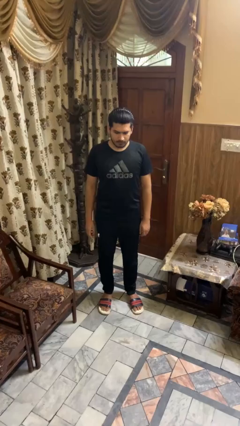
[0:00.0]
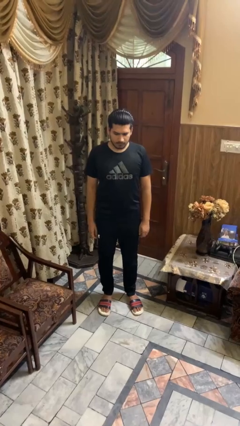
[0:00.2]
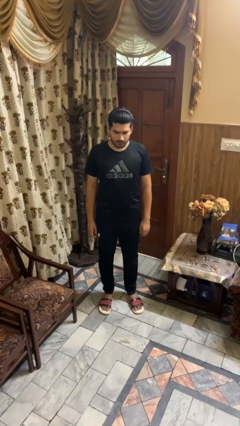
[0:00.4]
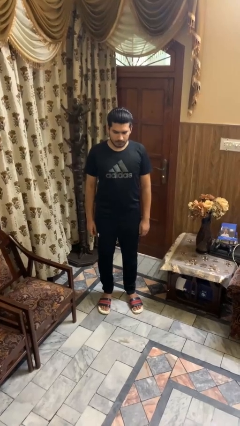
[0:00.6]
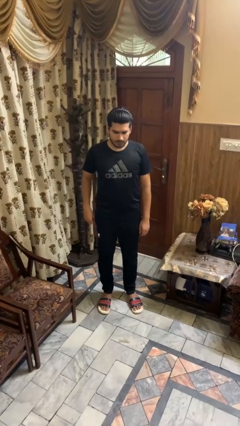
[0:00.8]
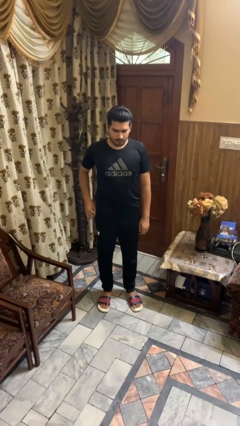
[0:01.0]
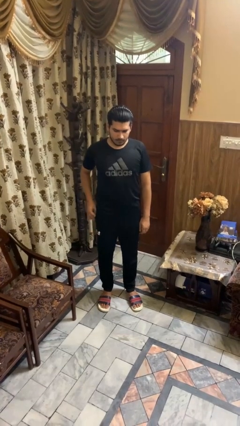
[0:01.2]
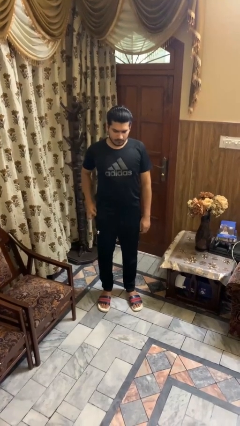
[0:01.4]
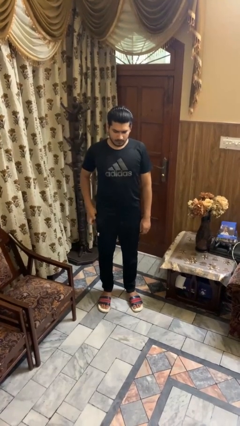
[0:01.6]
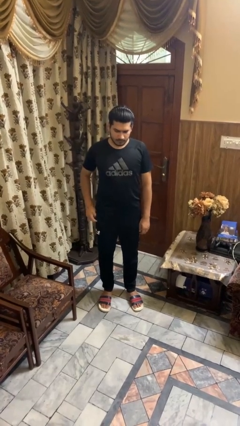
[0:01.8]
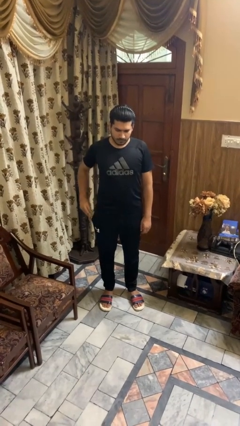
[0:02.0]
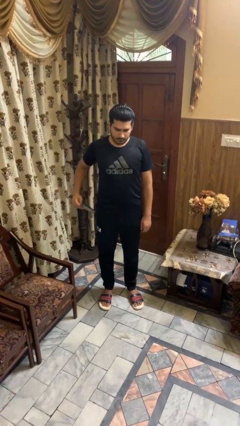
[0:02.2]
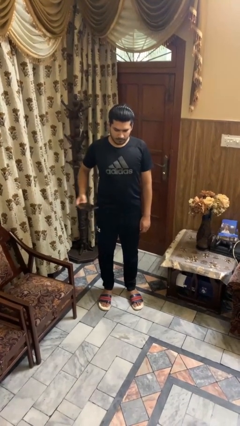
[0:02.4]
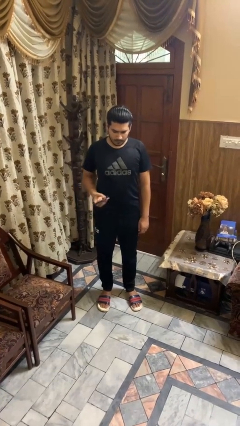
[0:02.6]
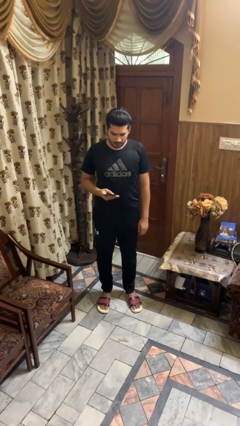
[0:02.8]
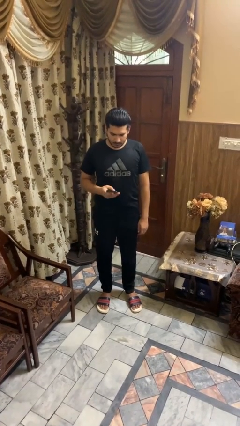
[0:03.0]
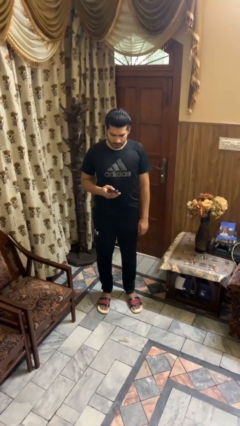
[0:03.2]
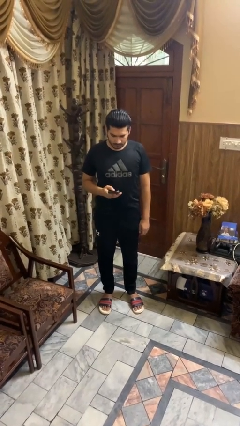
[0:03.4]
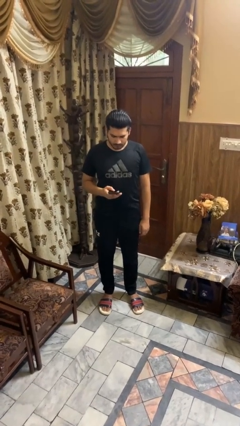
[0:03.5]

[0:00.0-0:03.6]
person takes phone from pocket

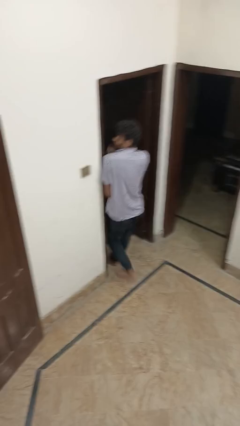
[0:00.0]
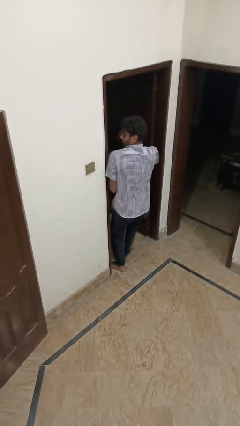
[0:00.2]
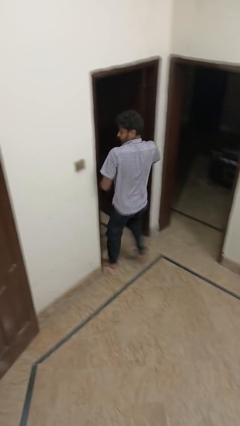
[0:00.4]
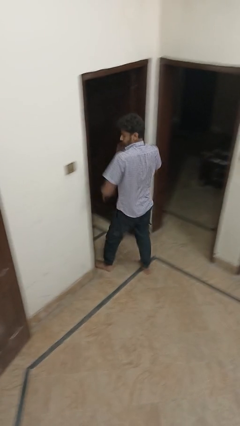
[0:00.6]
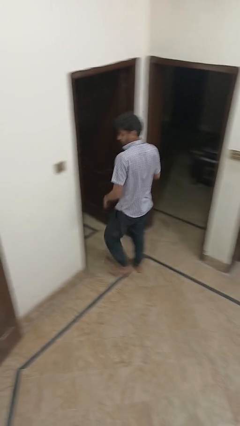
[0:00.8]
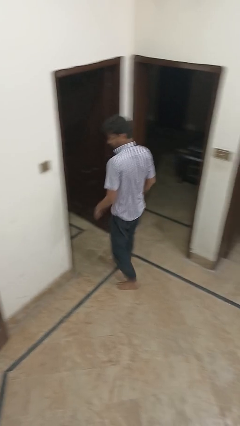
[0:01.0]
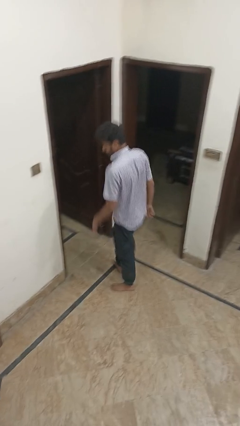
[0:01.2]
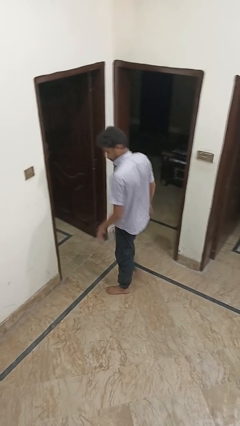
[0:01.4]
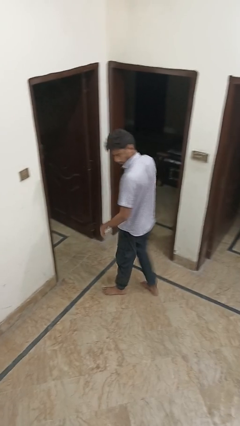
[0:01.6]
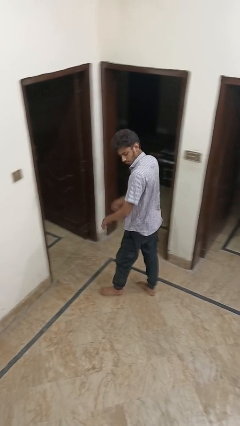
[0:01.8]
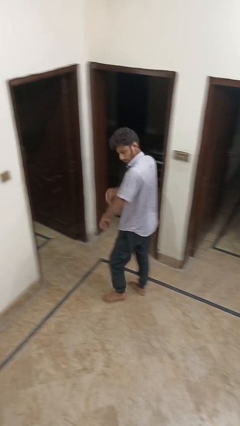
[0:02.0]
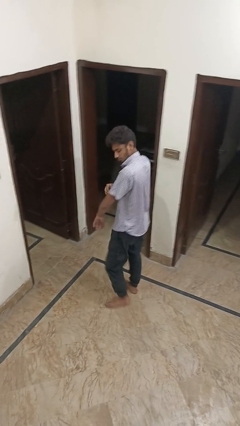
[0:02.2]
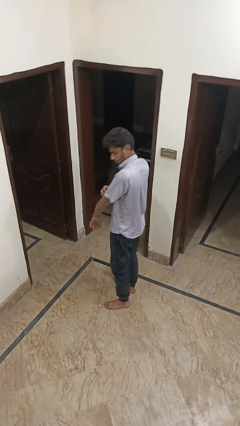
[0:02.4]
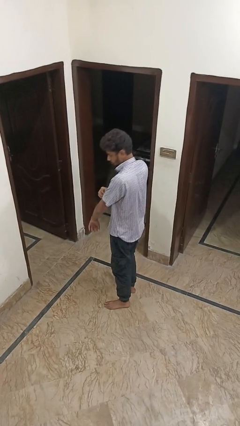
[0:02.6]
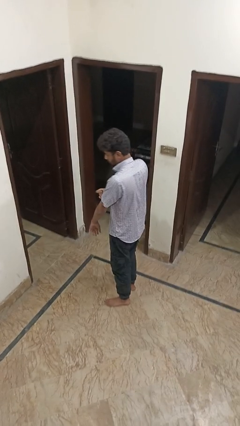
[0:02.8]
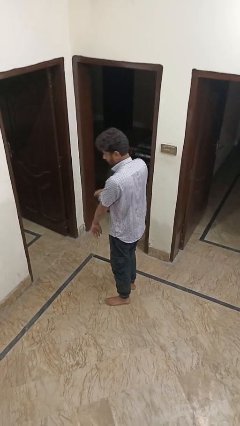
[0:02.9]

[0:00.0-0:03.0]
person bumps into wall

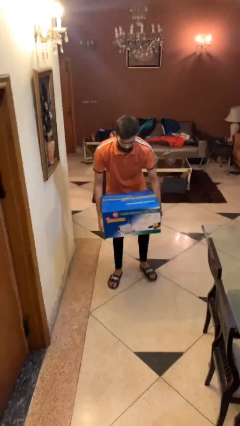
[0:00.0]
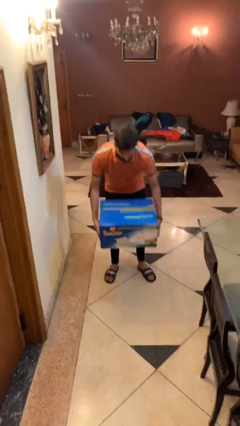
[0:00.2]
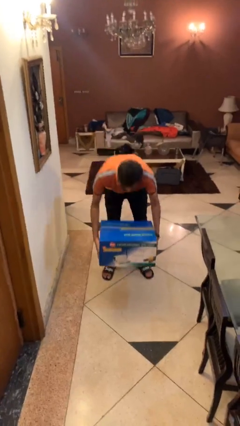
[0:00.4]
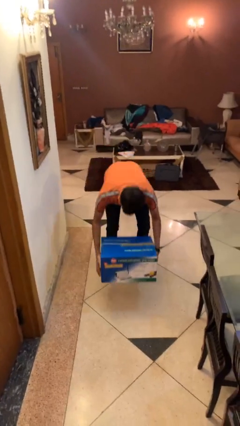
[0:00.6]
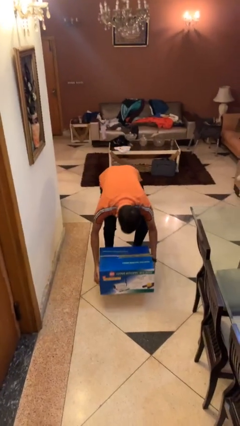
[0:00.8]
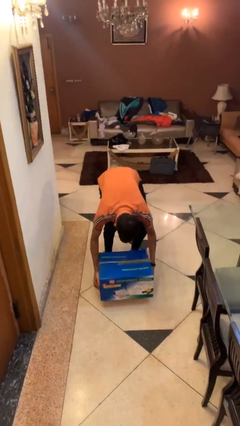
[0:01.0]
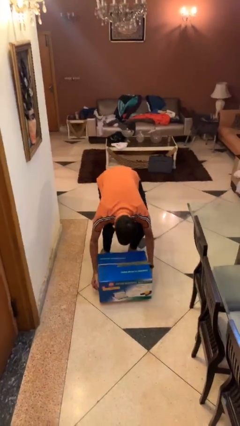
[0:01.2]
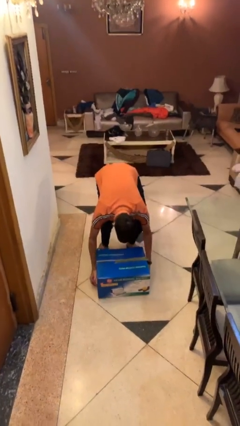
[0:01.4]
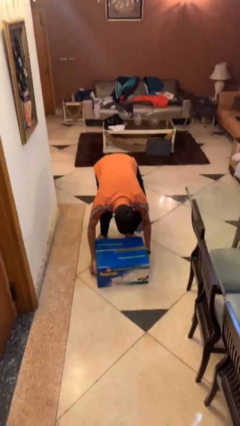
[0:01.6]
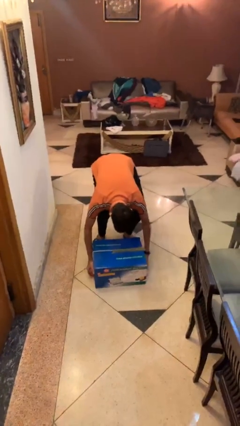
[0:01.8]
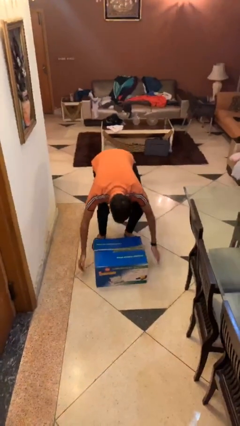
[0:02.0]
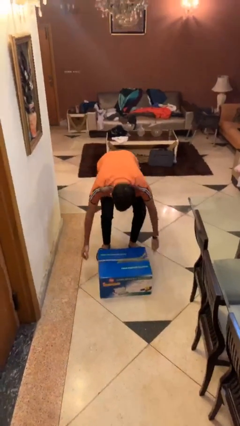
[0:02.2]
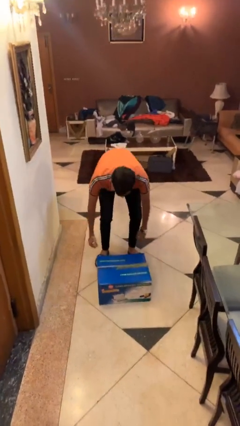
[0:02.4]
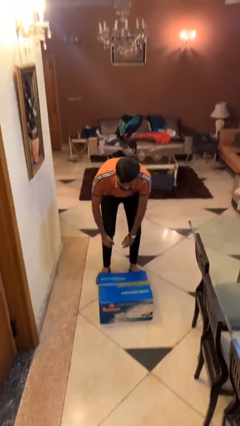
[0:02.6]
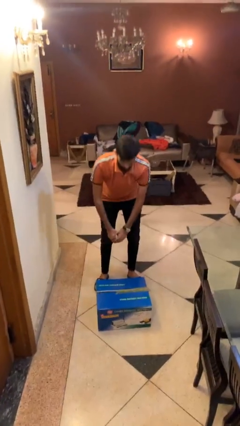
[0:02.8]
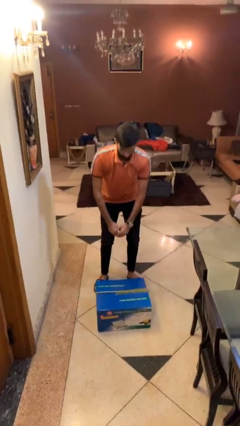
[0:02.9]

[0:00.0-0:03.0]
person puts down object on floor

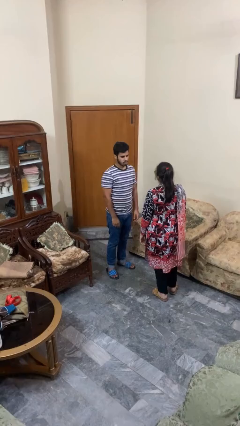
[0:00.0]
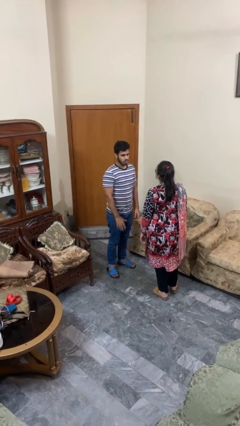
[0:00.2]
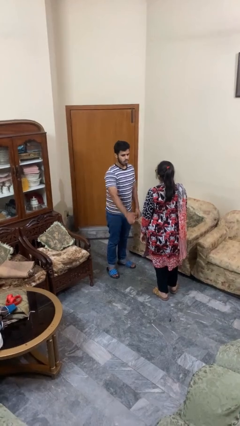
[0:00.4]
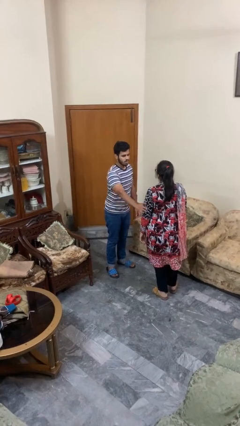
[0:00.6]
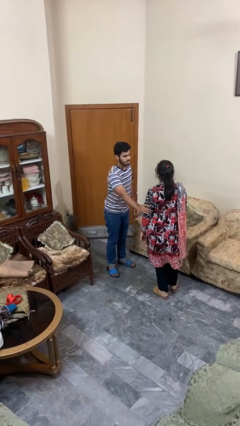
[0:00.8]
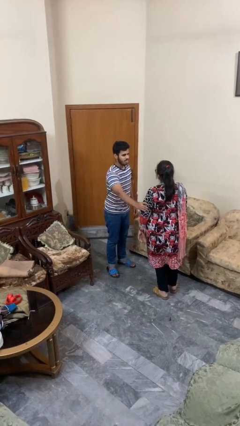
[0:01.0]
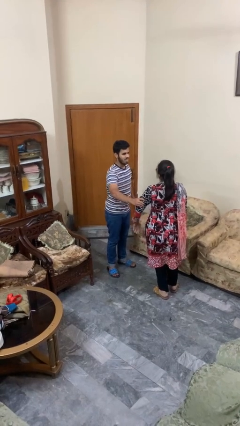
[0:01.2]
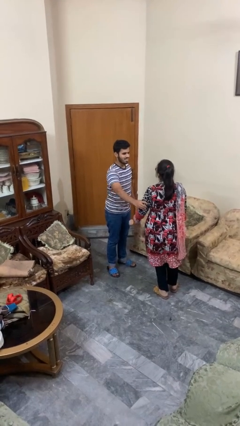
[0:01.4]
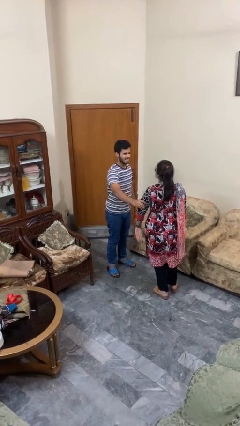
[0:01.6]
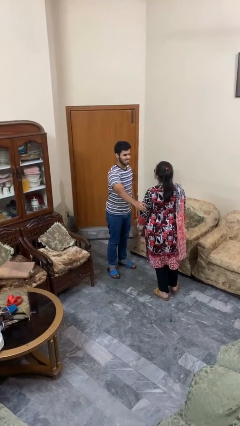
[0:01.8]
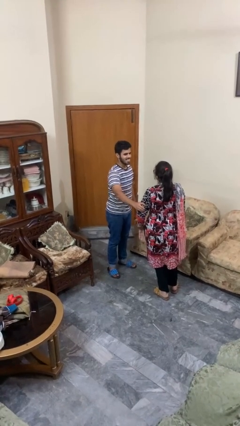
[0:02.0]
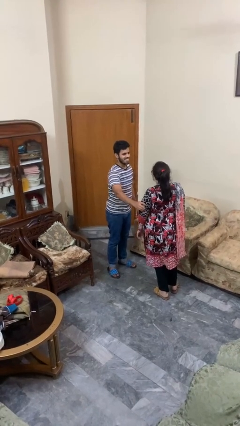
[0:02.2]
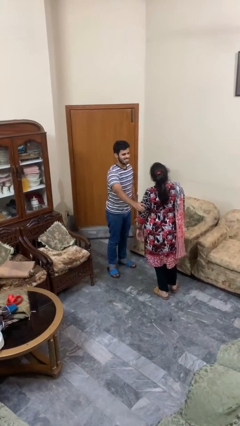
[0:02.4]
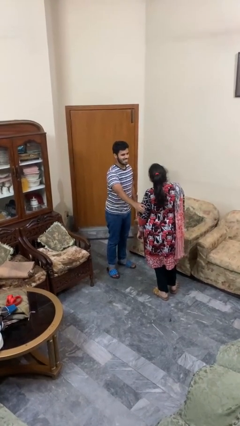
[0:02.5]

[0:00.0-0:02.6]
person grabs person by bicep

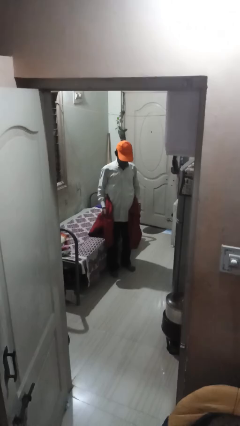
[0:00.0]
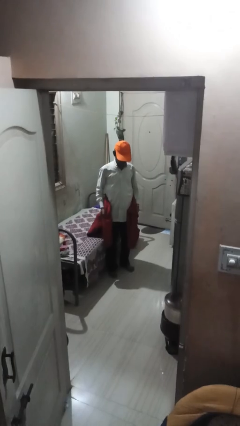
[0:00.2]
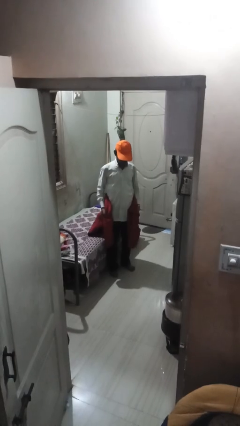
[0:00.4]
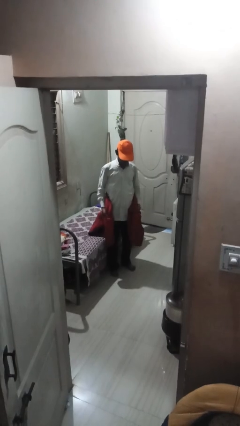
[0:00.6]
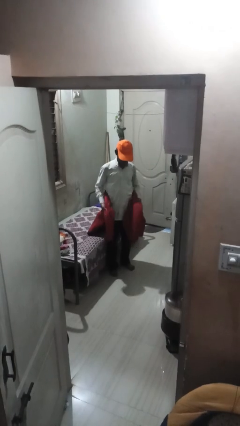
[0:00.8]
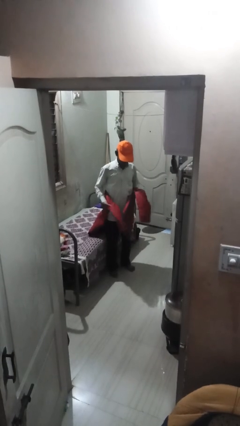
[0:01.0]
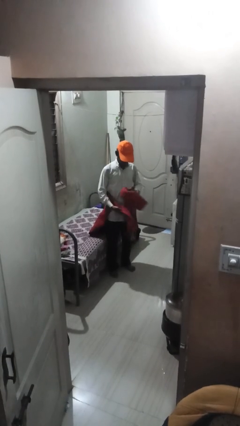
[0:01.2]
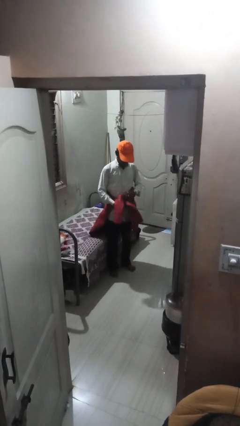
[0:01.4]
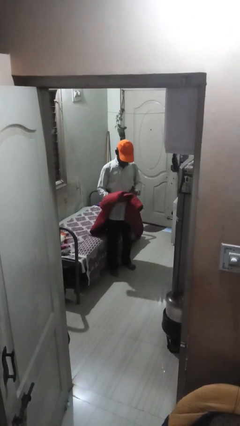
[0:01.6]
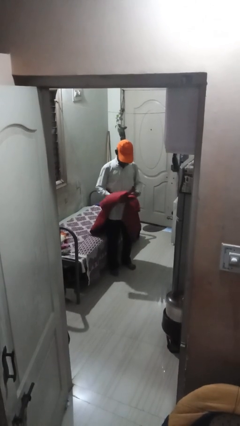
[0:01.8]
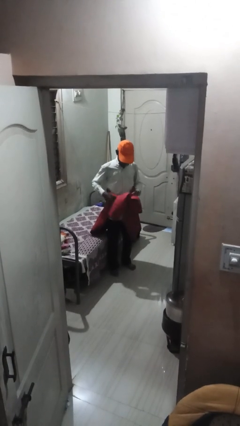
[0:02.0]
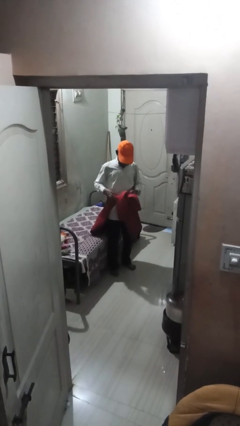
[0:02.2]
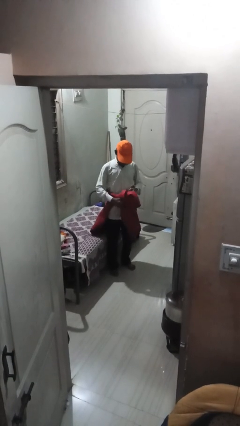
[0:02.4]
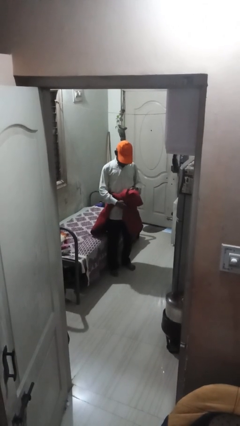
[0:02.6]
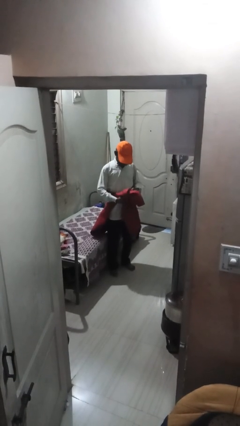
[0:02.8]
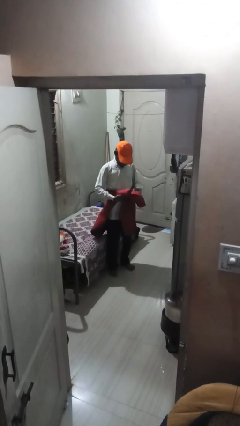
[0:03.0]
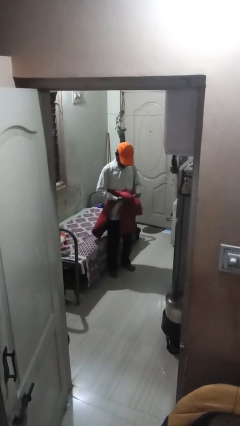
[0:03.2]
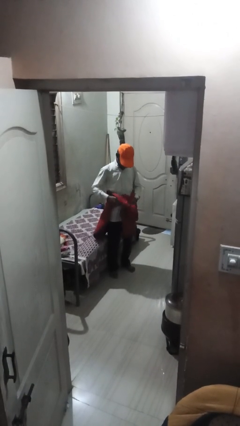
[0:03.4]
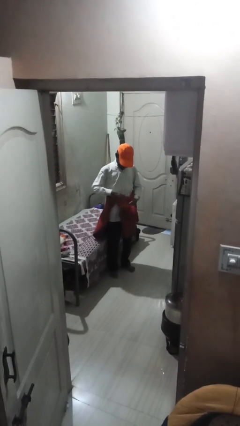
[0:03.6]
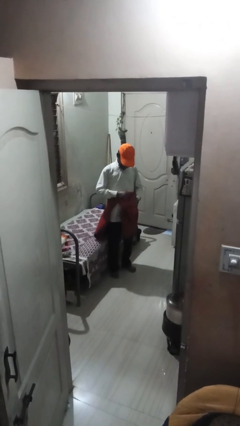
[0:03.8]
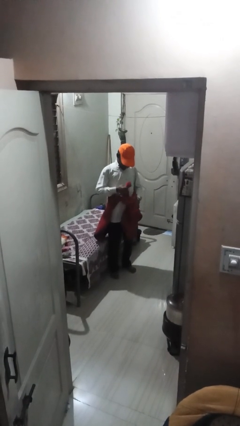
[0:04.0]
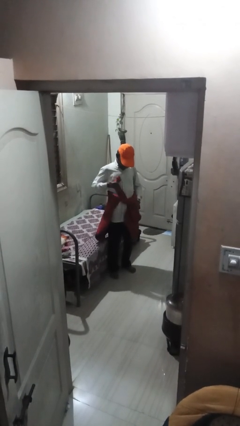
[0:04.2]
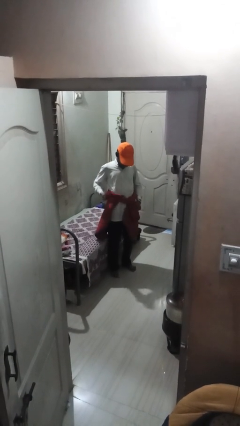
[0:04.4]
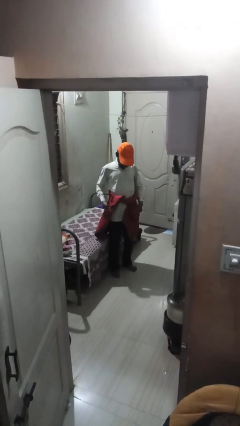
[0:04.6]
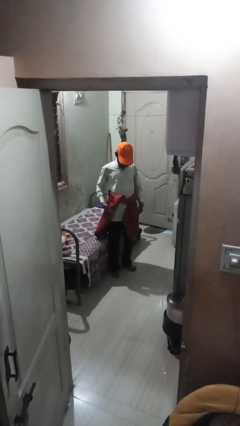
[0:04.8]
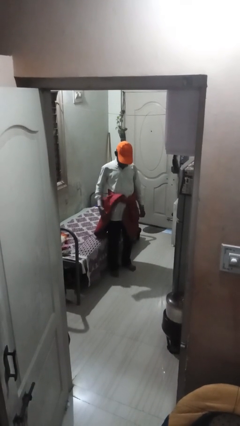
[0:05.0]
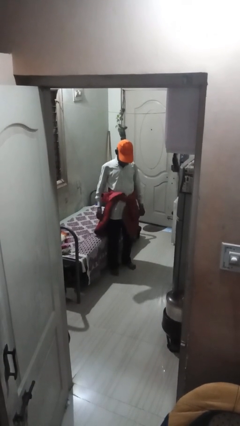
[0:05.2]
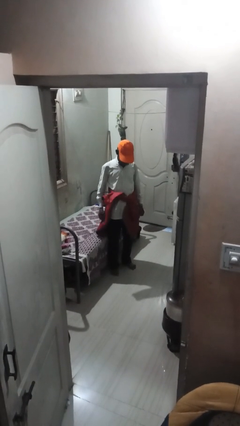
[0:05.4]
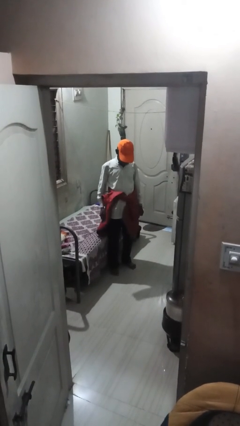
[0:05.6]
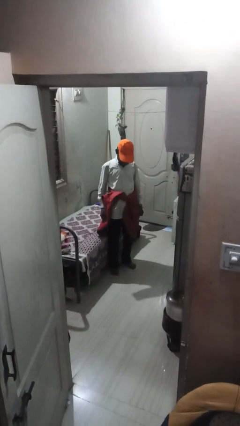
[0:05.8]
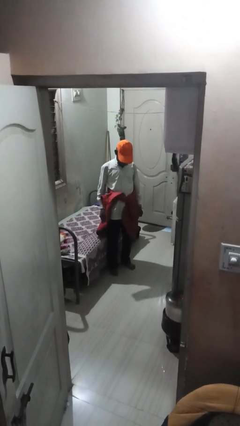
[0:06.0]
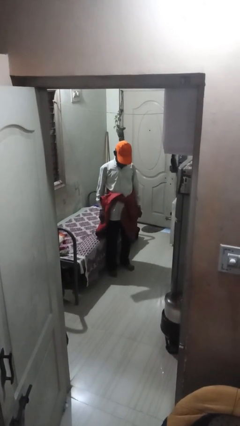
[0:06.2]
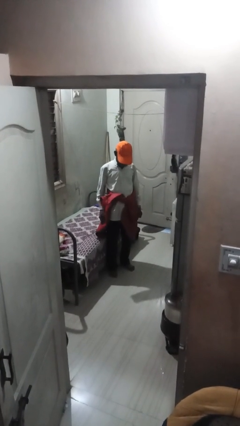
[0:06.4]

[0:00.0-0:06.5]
person ties jacket around waist
